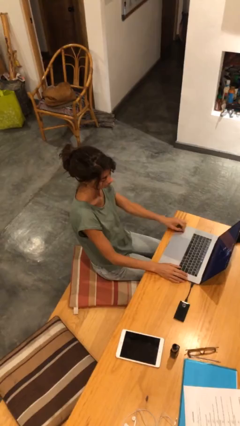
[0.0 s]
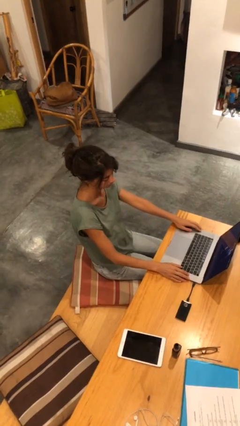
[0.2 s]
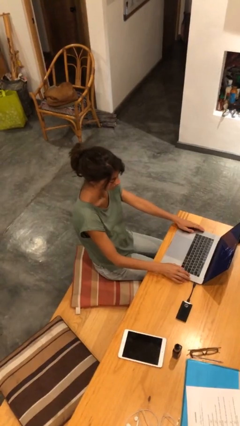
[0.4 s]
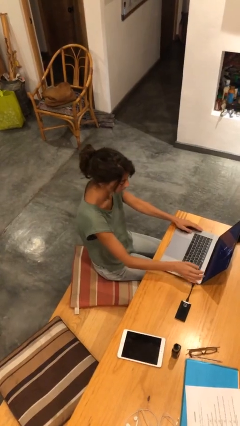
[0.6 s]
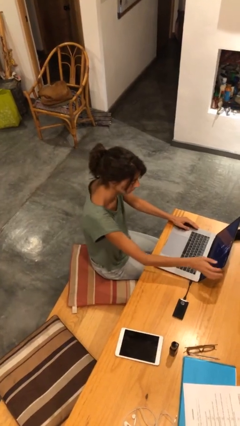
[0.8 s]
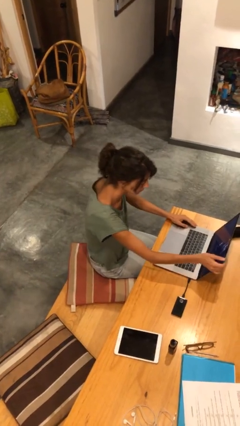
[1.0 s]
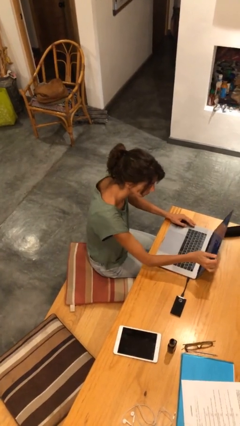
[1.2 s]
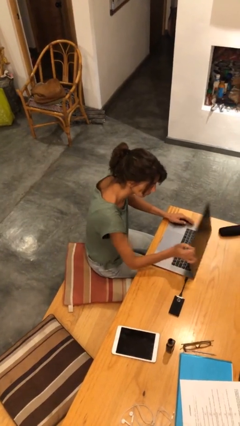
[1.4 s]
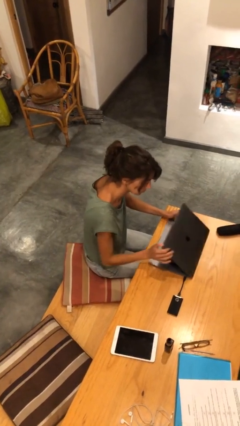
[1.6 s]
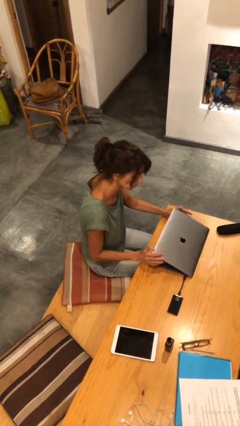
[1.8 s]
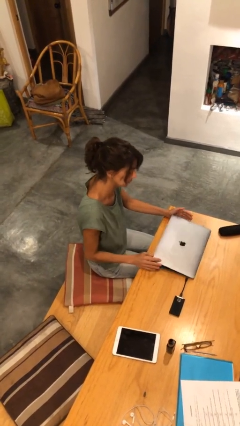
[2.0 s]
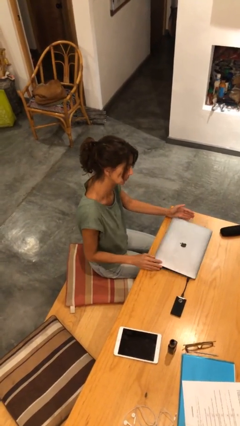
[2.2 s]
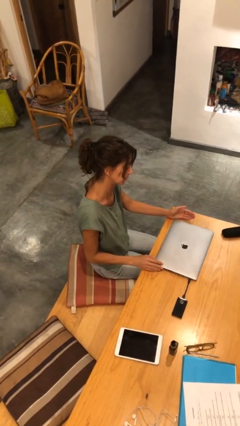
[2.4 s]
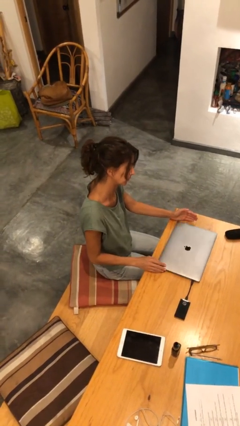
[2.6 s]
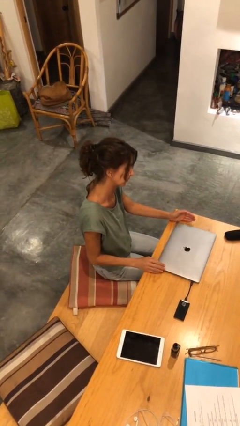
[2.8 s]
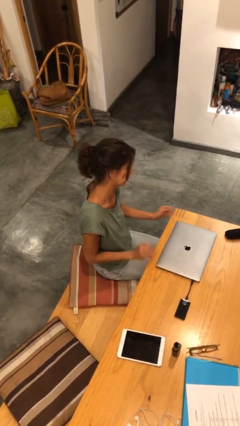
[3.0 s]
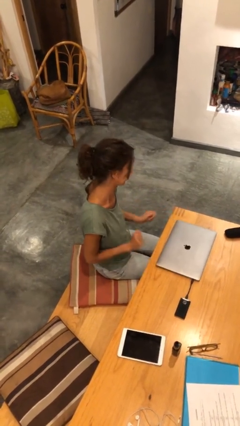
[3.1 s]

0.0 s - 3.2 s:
person closes laptop

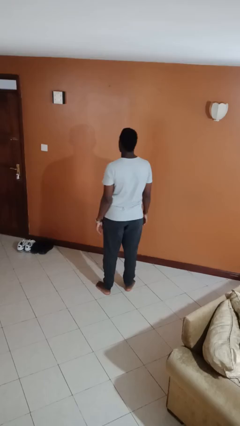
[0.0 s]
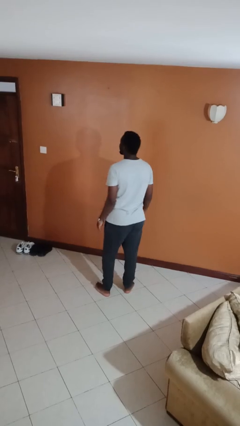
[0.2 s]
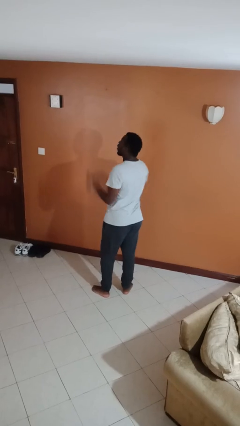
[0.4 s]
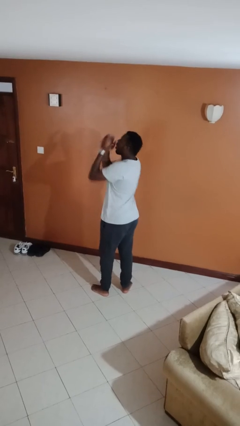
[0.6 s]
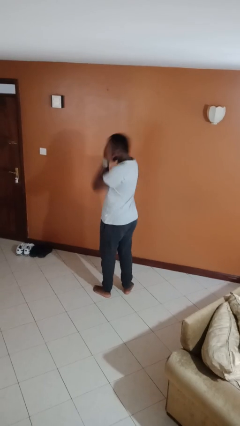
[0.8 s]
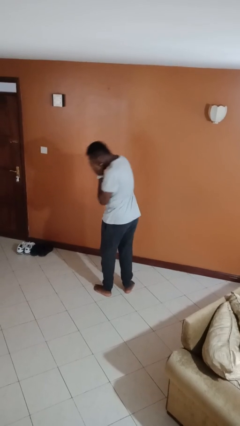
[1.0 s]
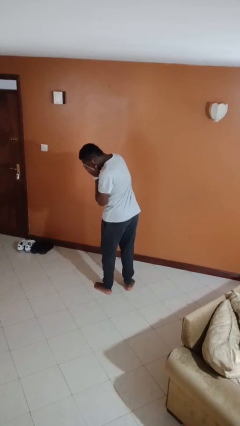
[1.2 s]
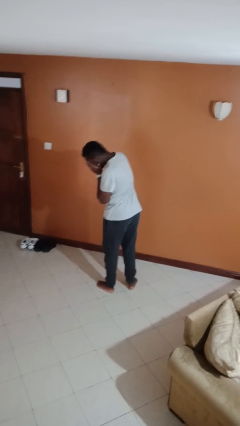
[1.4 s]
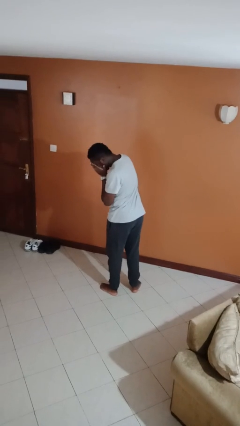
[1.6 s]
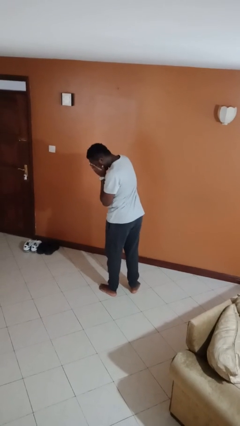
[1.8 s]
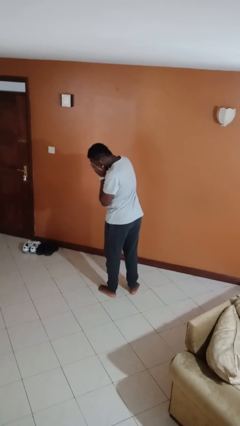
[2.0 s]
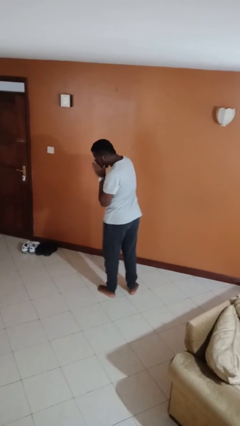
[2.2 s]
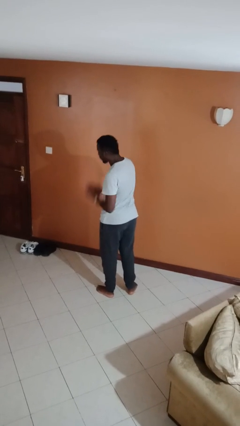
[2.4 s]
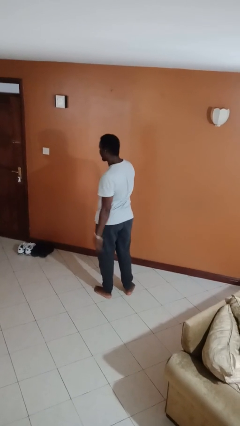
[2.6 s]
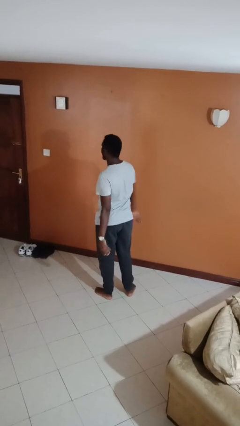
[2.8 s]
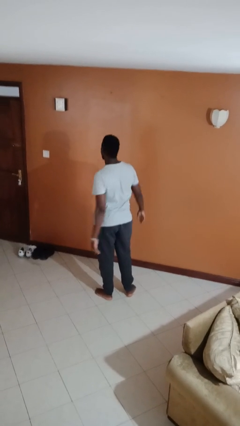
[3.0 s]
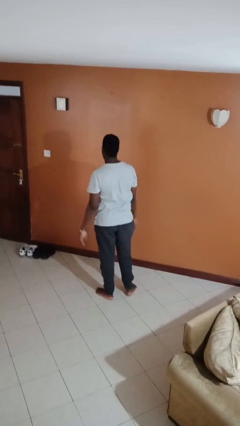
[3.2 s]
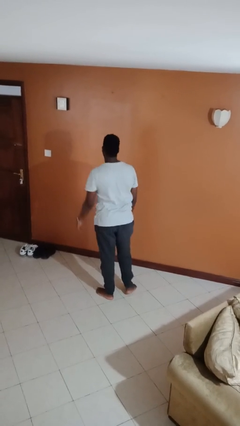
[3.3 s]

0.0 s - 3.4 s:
person sneezes into hand

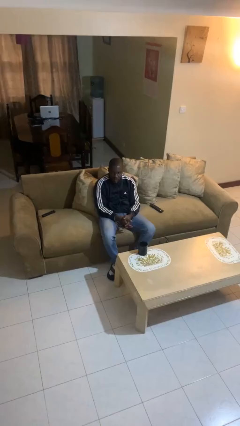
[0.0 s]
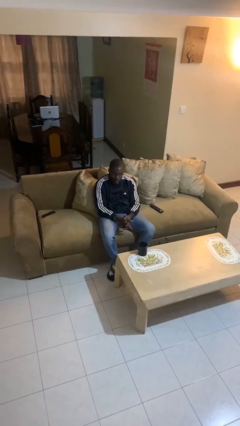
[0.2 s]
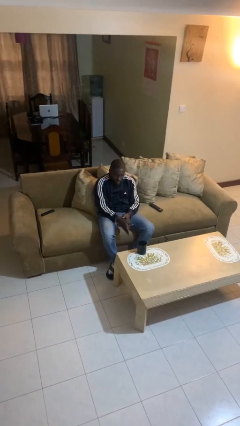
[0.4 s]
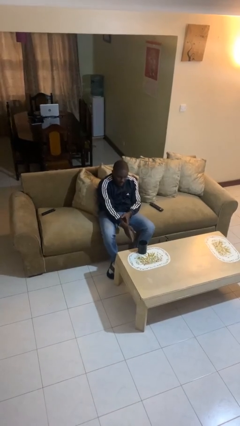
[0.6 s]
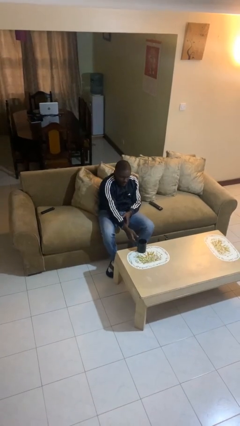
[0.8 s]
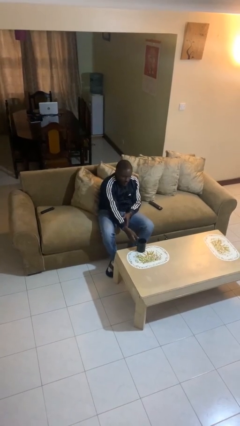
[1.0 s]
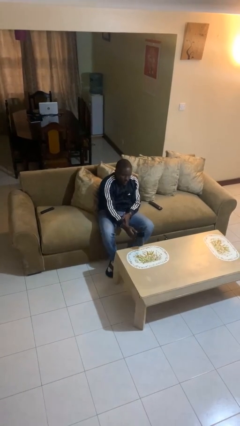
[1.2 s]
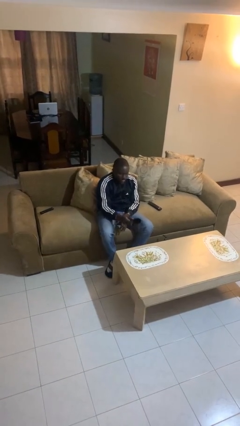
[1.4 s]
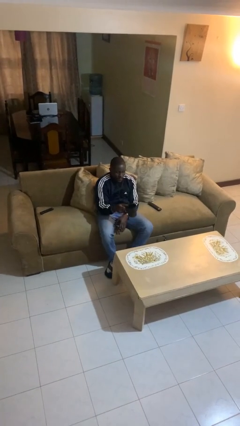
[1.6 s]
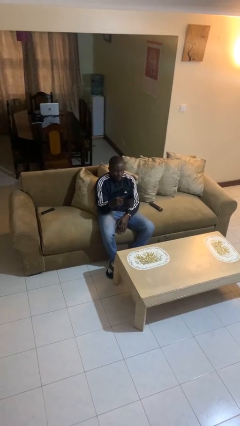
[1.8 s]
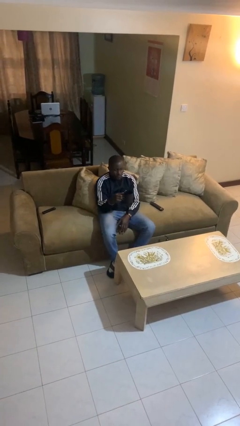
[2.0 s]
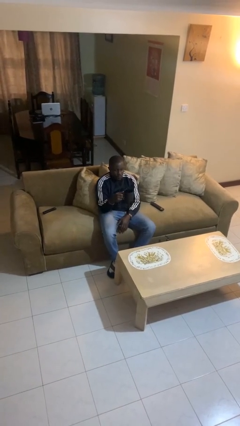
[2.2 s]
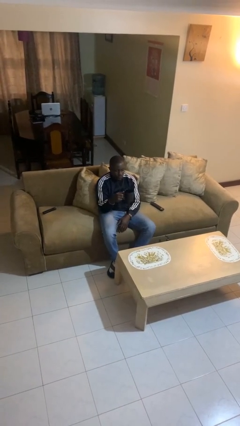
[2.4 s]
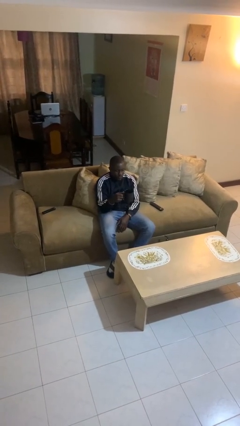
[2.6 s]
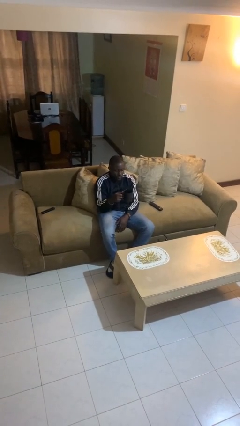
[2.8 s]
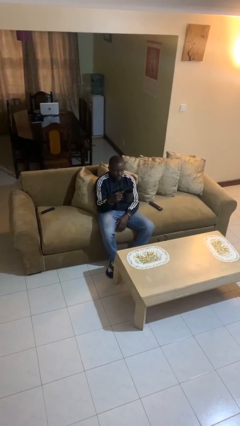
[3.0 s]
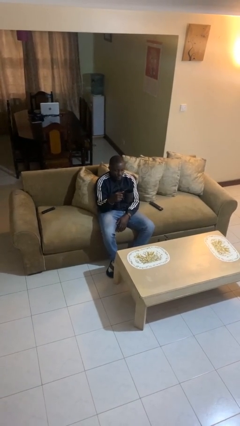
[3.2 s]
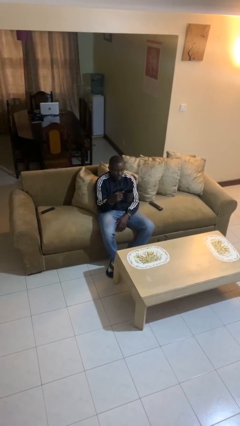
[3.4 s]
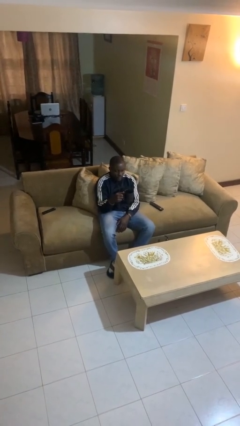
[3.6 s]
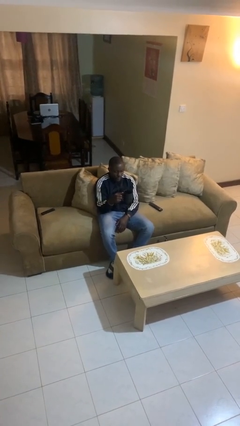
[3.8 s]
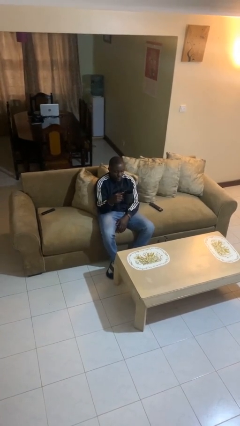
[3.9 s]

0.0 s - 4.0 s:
person picks up object from table

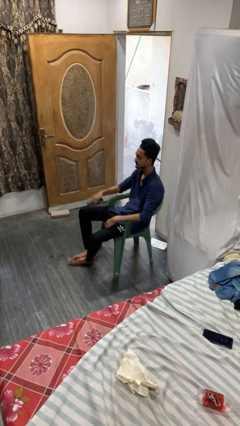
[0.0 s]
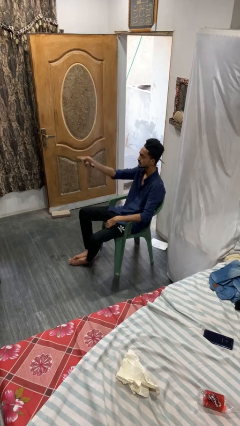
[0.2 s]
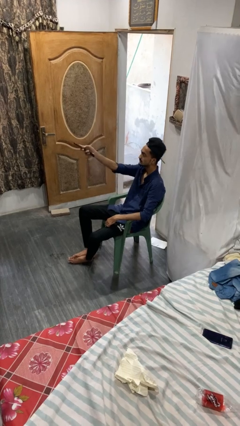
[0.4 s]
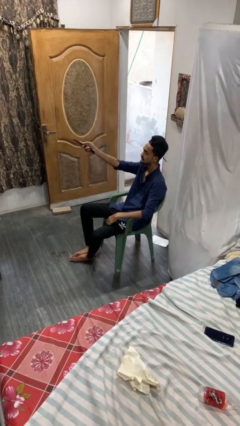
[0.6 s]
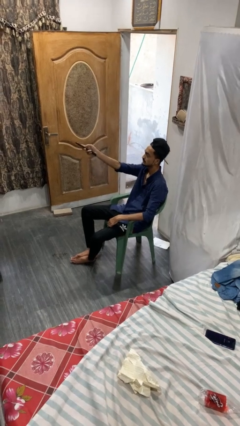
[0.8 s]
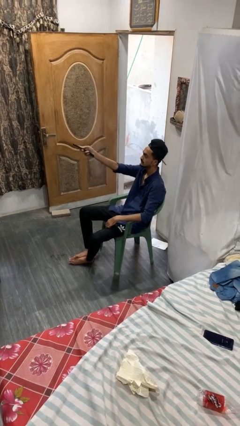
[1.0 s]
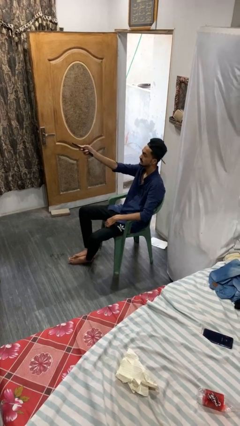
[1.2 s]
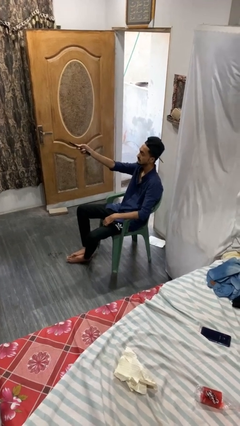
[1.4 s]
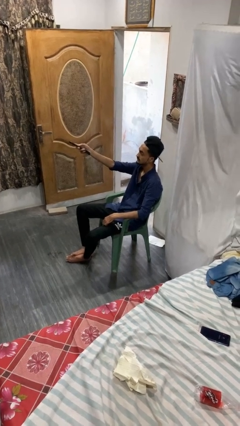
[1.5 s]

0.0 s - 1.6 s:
person uses television remote

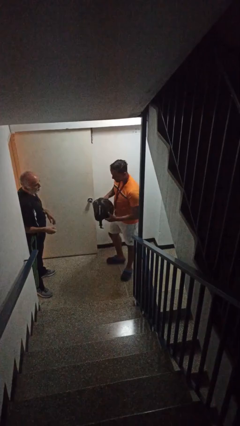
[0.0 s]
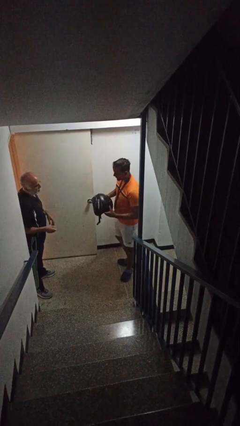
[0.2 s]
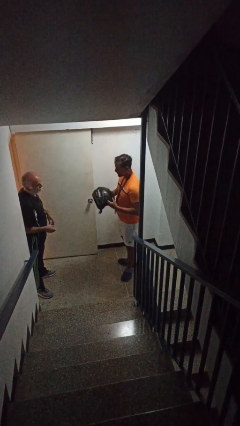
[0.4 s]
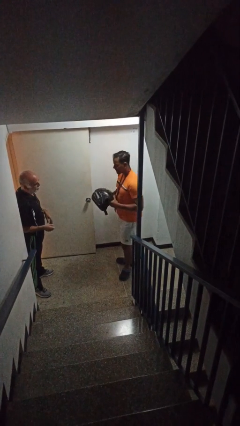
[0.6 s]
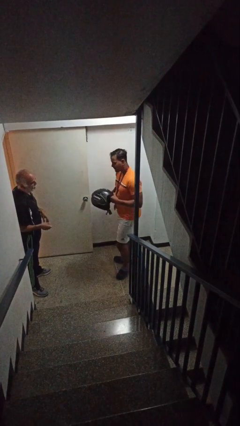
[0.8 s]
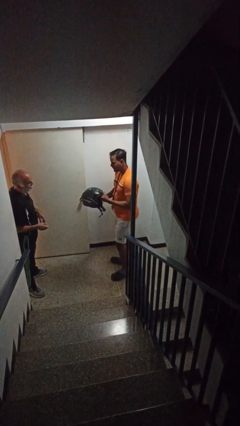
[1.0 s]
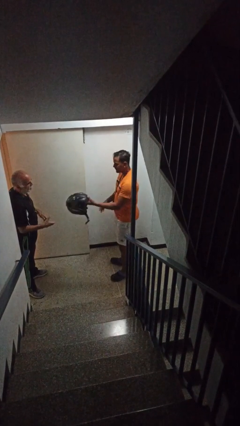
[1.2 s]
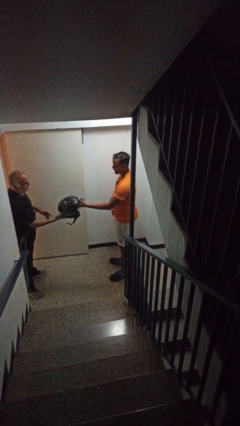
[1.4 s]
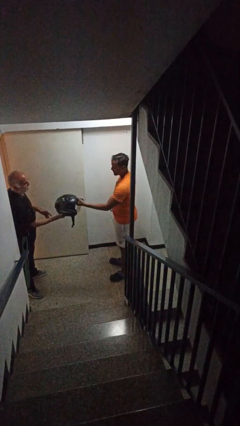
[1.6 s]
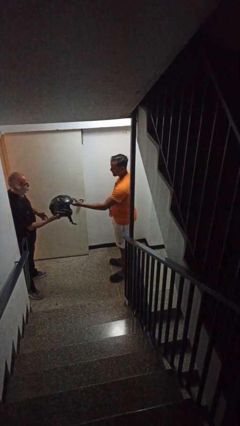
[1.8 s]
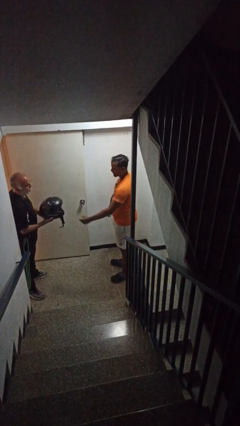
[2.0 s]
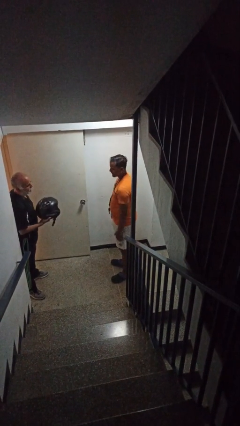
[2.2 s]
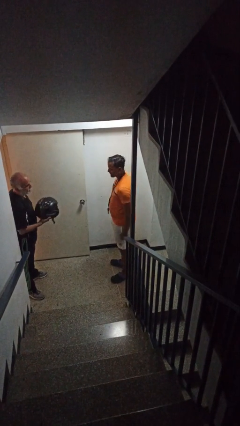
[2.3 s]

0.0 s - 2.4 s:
person transfers object to person

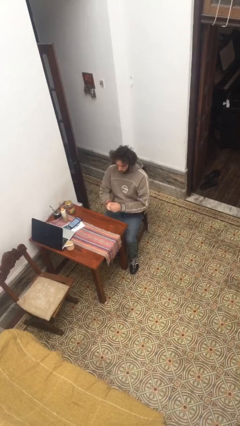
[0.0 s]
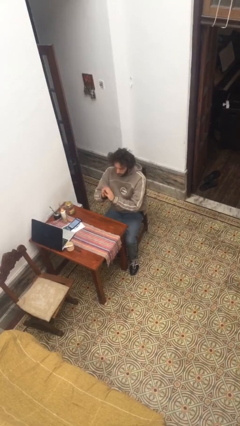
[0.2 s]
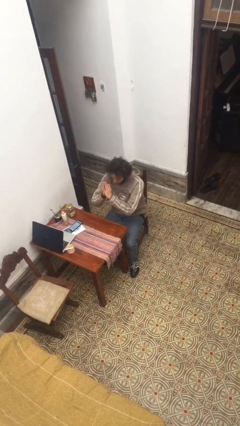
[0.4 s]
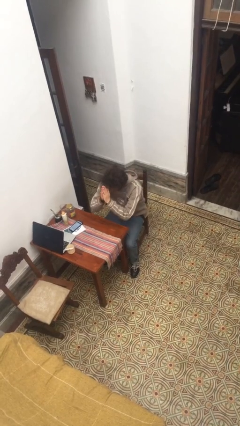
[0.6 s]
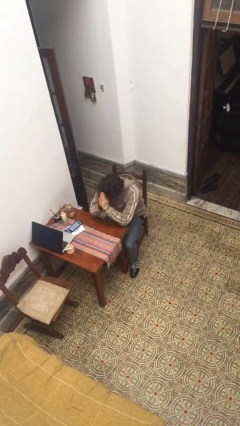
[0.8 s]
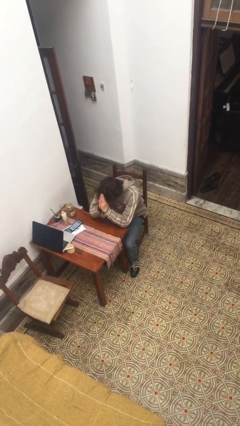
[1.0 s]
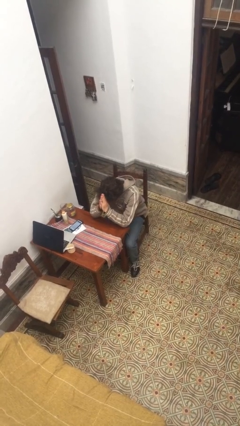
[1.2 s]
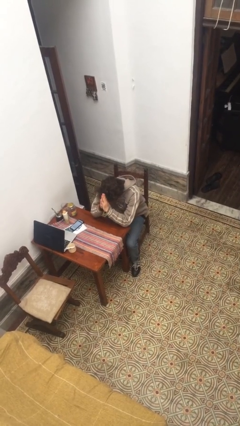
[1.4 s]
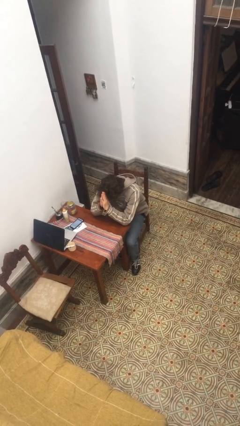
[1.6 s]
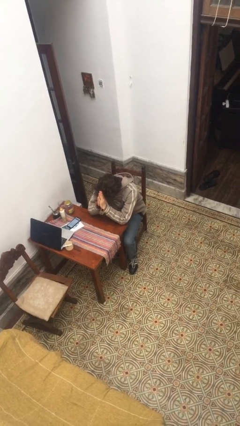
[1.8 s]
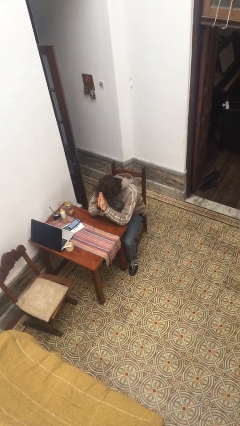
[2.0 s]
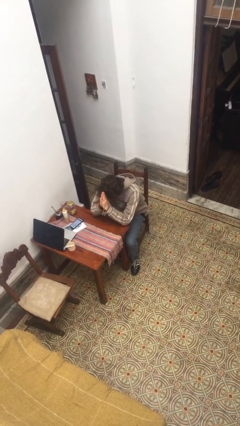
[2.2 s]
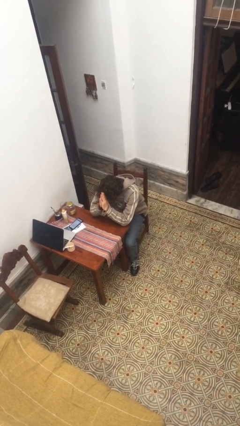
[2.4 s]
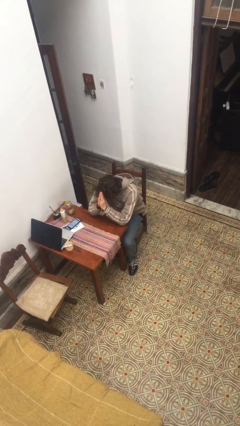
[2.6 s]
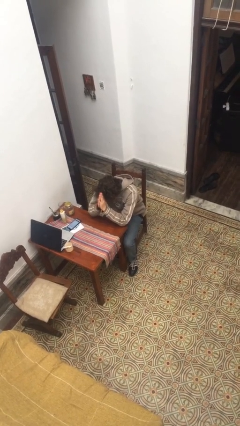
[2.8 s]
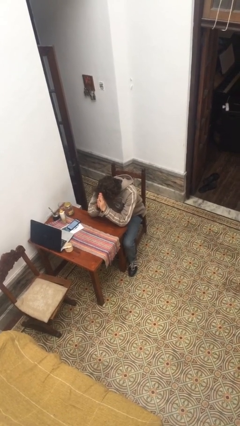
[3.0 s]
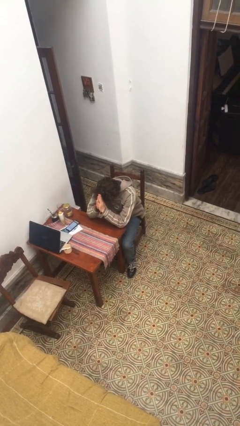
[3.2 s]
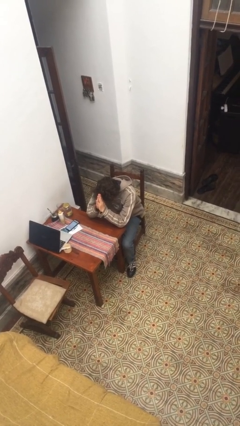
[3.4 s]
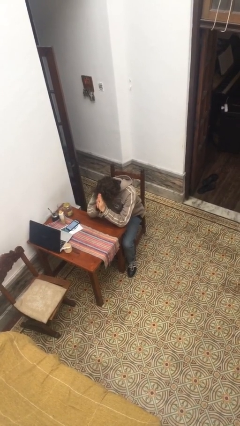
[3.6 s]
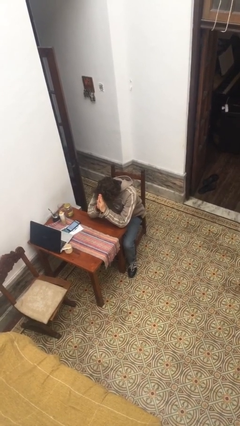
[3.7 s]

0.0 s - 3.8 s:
person prays
